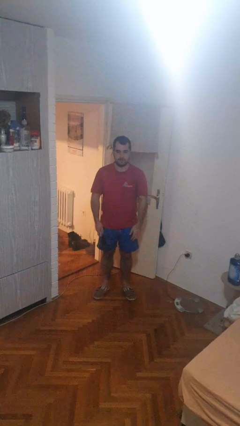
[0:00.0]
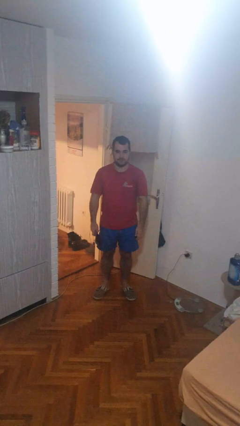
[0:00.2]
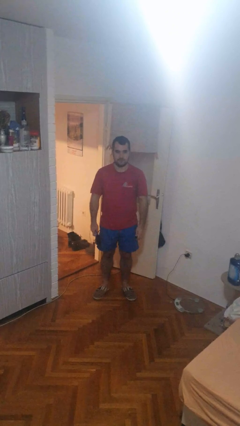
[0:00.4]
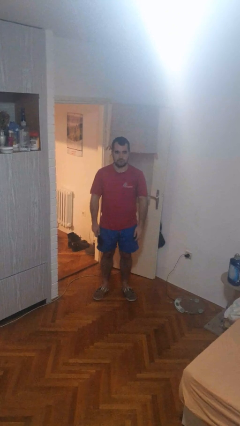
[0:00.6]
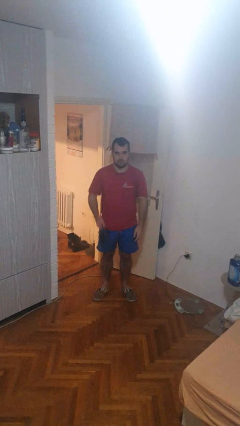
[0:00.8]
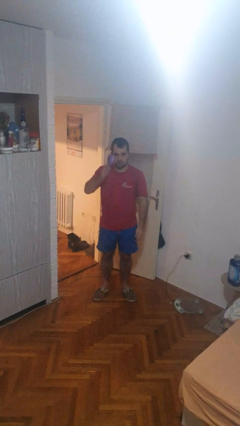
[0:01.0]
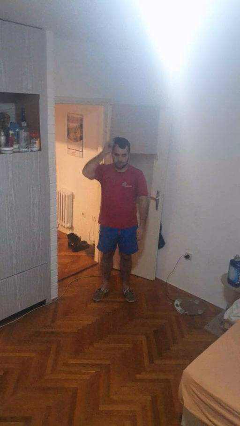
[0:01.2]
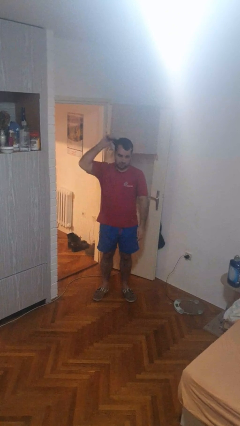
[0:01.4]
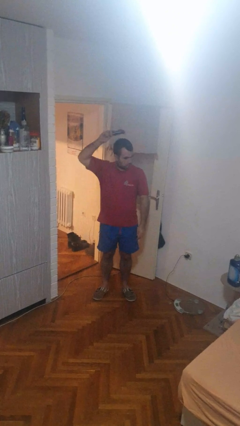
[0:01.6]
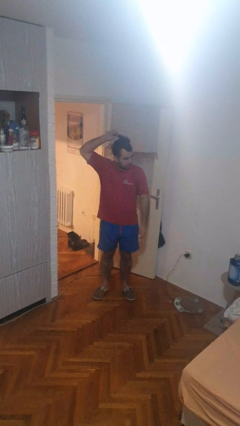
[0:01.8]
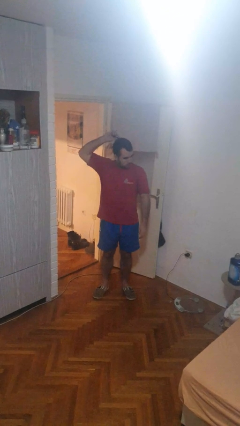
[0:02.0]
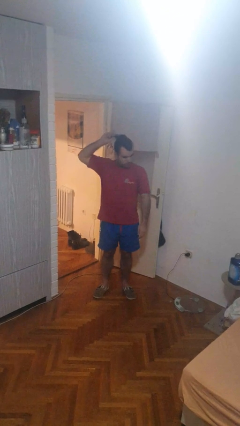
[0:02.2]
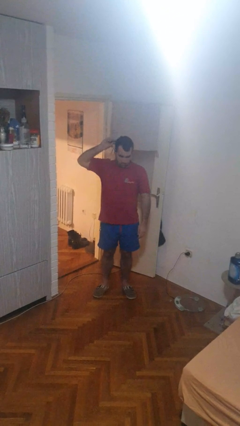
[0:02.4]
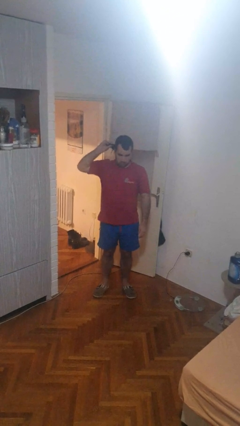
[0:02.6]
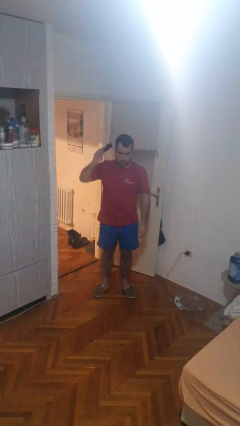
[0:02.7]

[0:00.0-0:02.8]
person brushes hair

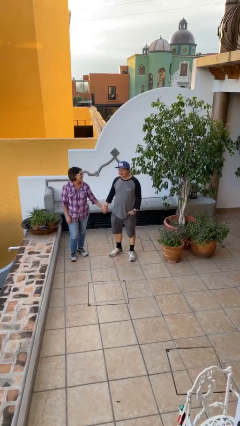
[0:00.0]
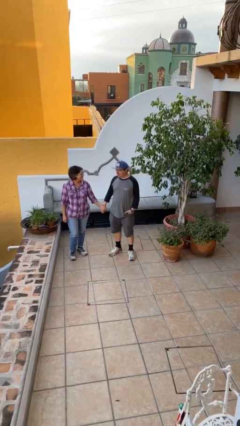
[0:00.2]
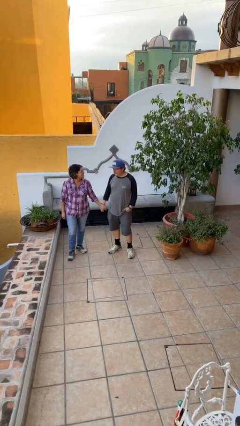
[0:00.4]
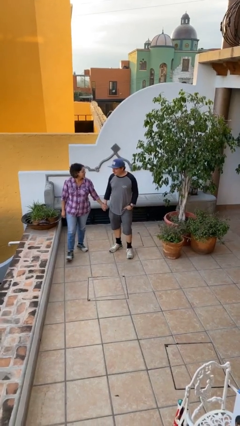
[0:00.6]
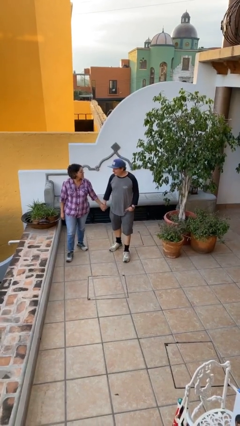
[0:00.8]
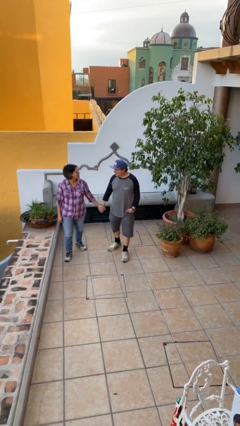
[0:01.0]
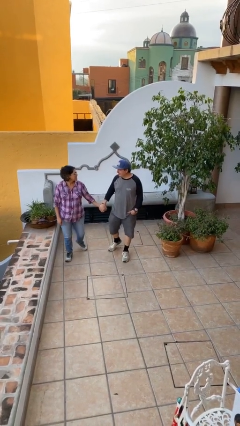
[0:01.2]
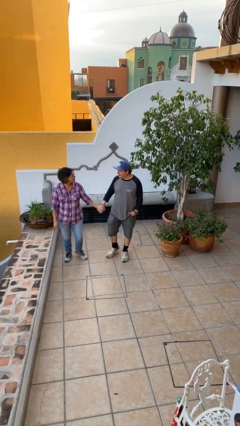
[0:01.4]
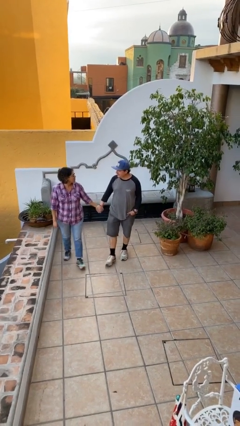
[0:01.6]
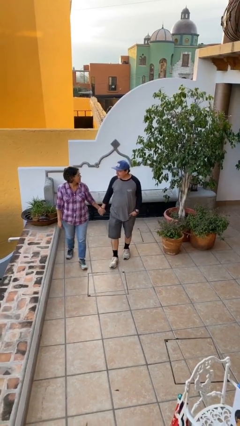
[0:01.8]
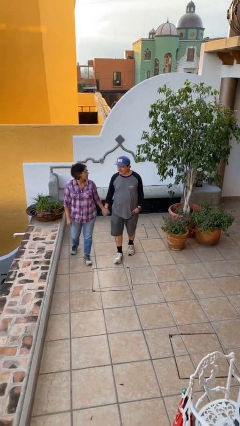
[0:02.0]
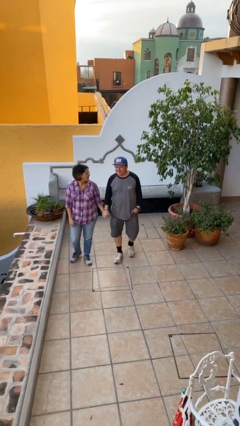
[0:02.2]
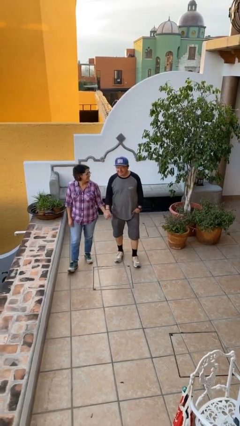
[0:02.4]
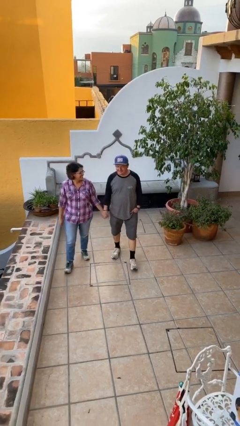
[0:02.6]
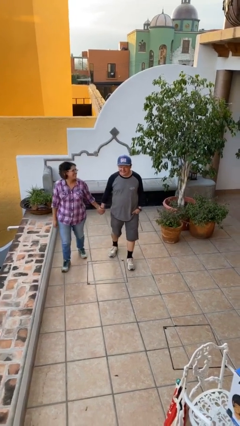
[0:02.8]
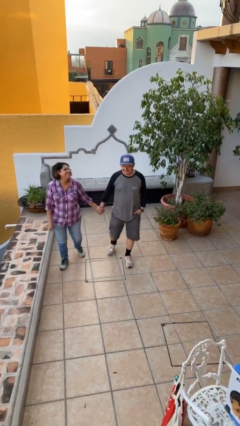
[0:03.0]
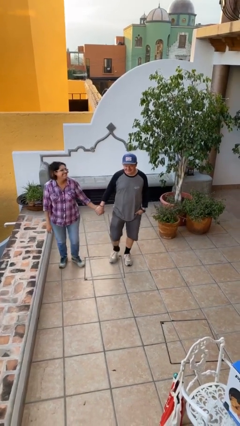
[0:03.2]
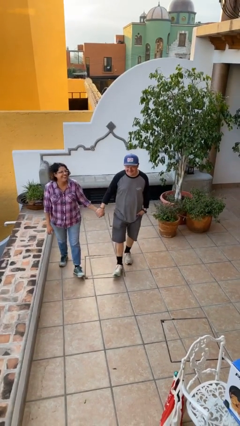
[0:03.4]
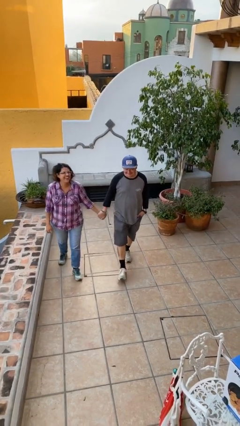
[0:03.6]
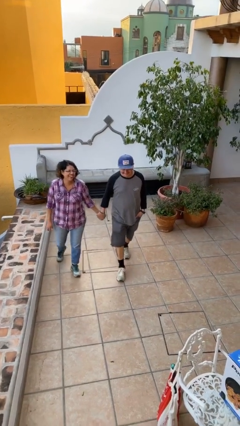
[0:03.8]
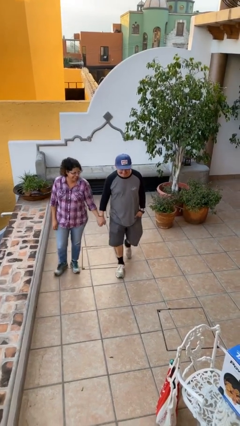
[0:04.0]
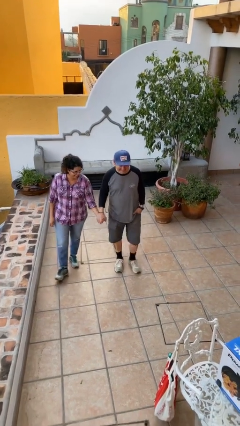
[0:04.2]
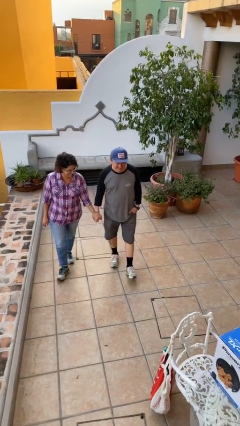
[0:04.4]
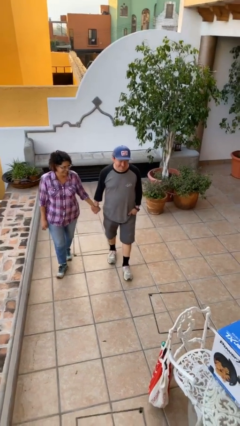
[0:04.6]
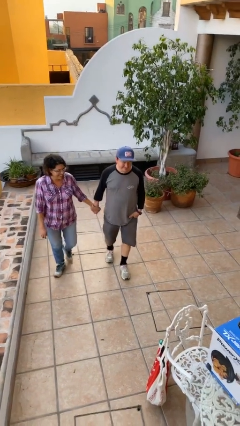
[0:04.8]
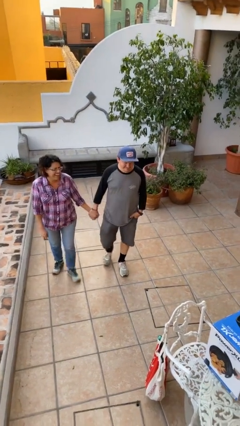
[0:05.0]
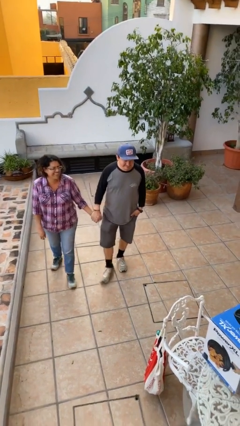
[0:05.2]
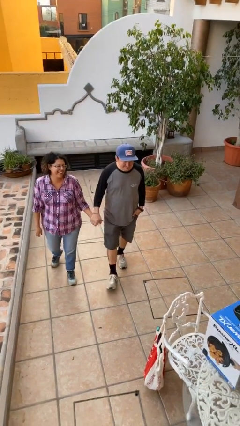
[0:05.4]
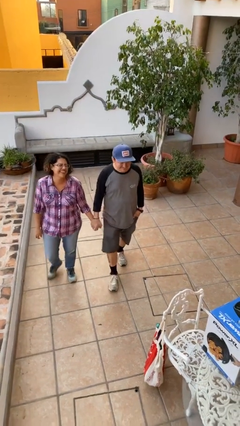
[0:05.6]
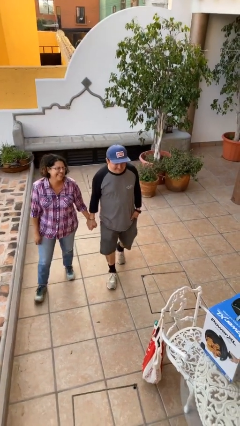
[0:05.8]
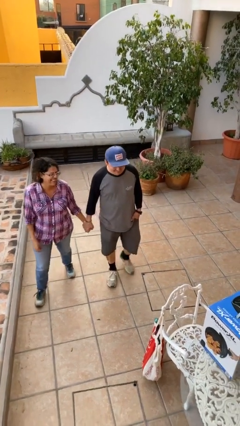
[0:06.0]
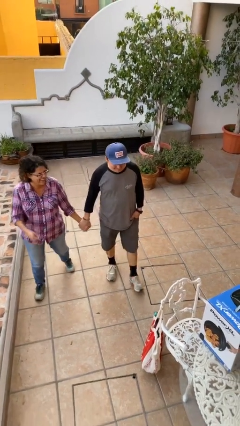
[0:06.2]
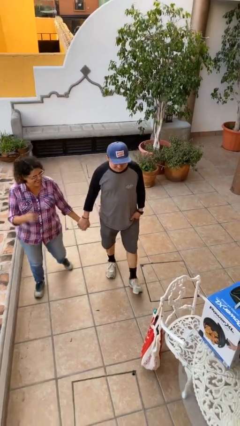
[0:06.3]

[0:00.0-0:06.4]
person holds hand

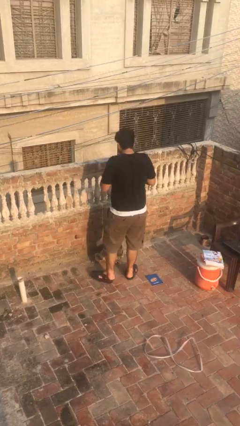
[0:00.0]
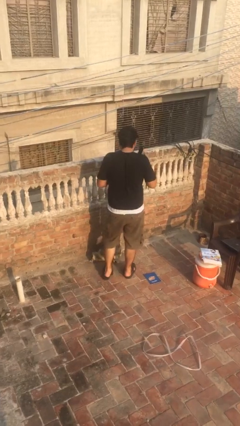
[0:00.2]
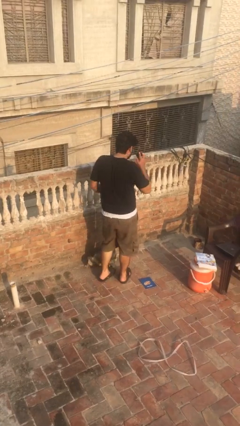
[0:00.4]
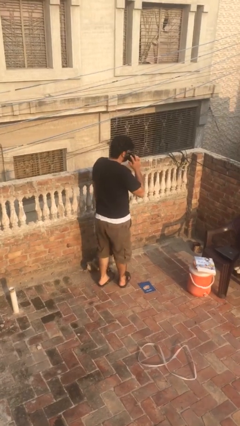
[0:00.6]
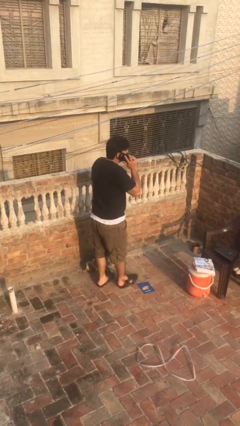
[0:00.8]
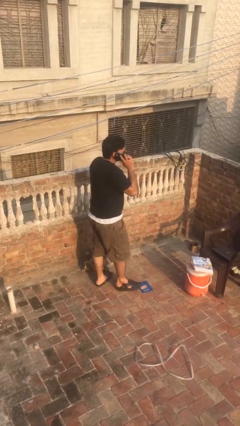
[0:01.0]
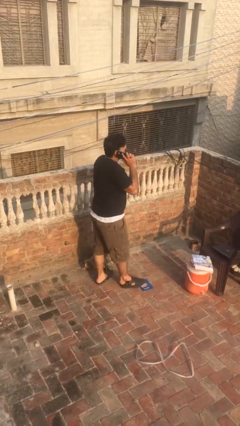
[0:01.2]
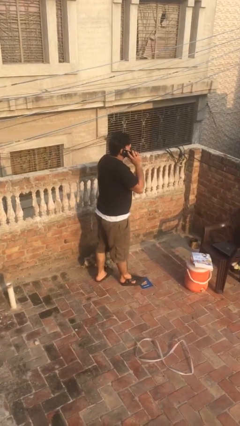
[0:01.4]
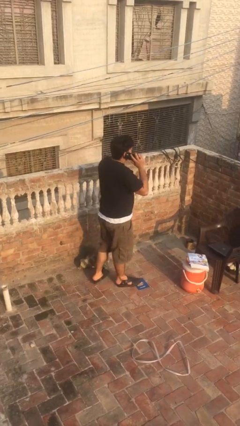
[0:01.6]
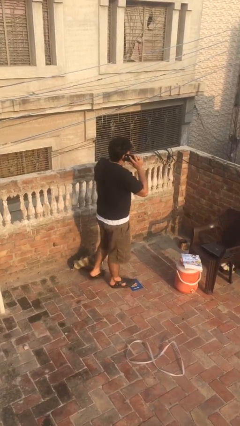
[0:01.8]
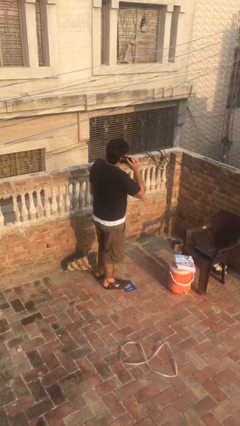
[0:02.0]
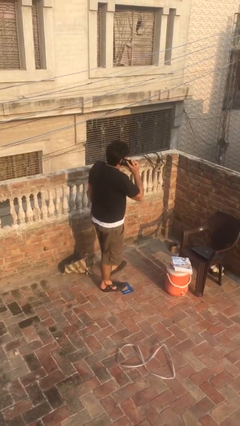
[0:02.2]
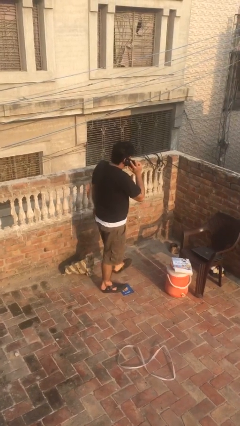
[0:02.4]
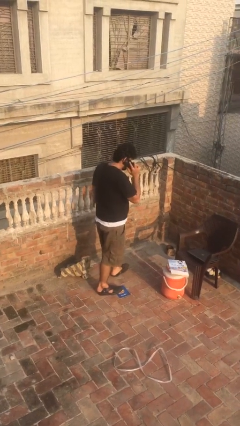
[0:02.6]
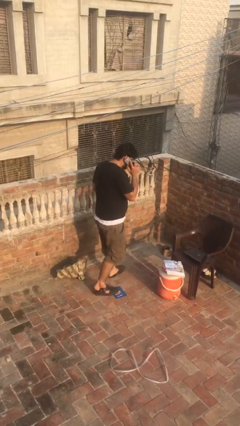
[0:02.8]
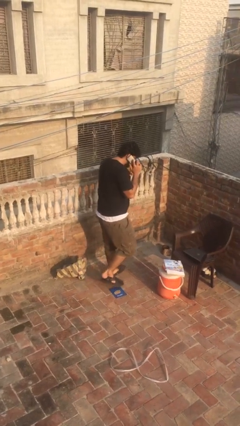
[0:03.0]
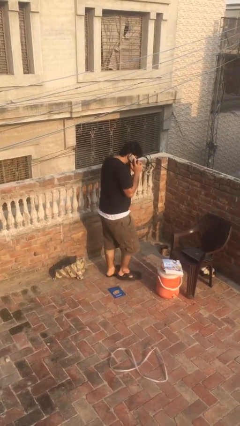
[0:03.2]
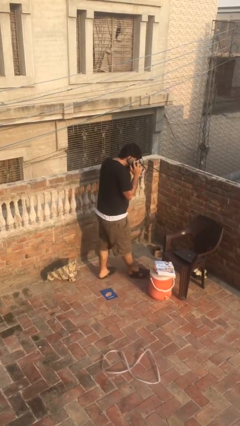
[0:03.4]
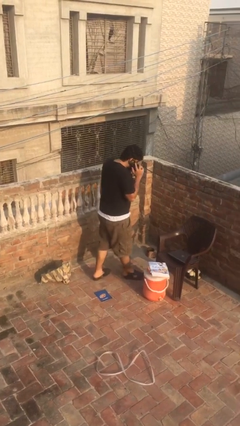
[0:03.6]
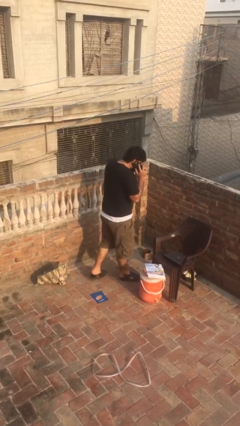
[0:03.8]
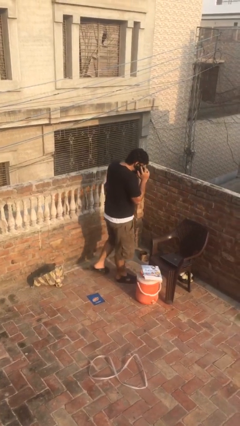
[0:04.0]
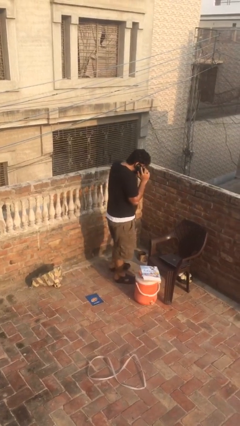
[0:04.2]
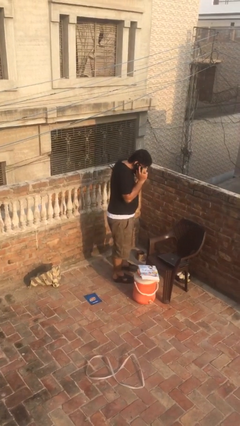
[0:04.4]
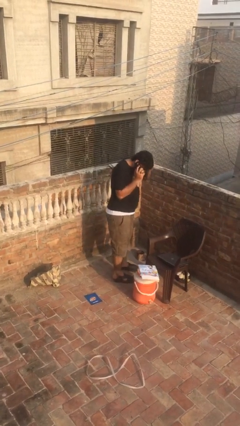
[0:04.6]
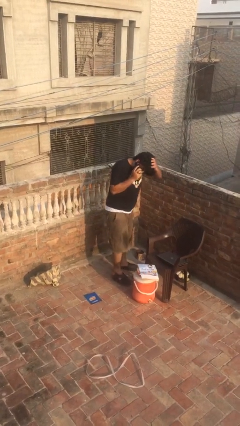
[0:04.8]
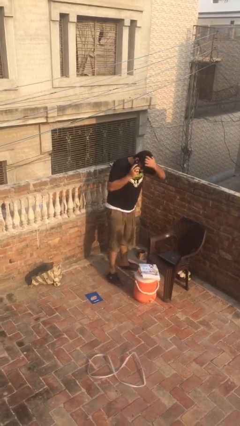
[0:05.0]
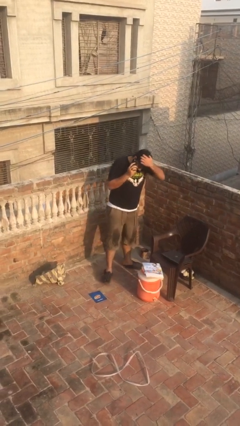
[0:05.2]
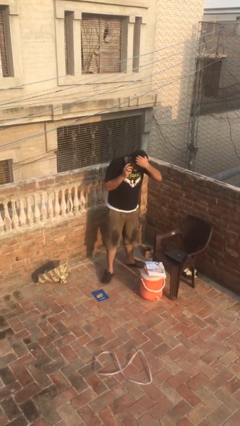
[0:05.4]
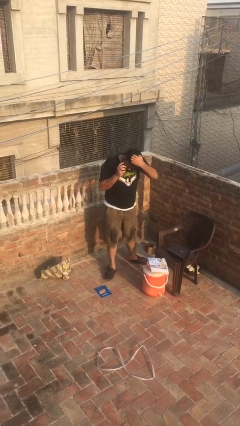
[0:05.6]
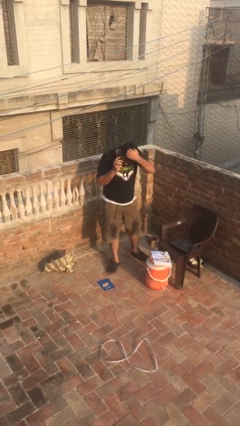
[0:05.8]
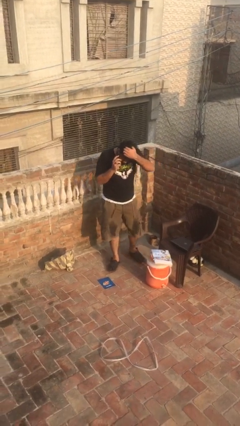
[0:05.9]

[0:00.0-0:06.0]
person talks on phone

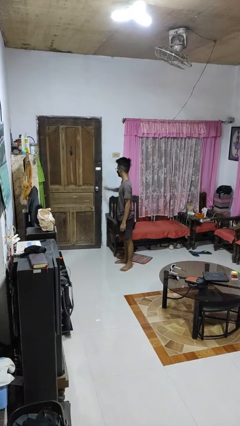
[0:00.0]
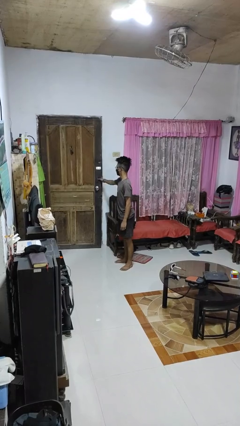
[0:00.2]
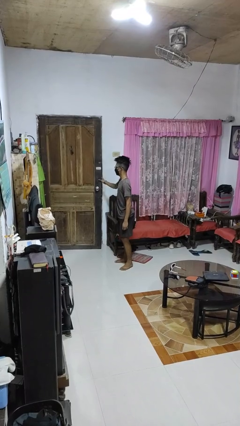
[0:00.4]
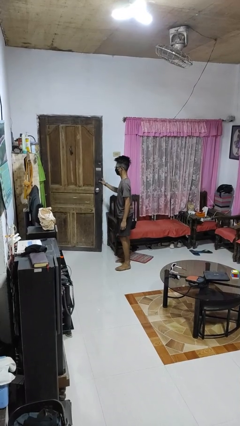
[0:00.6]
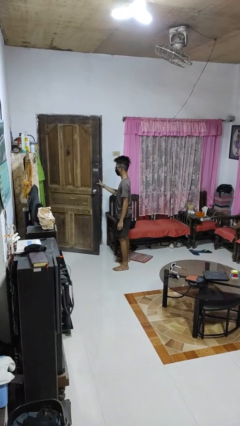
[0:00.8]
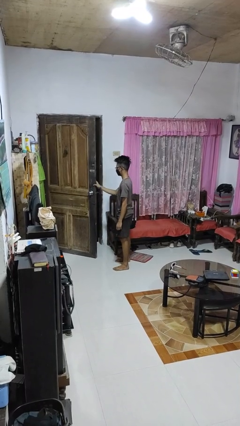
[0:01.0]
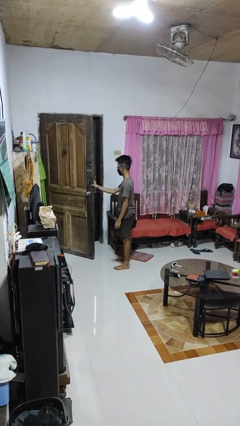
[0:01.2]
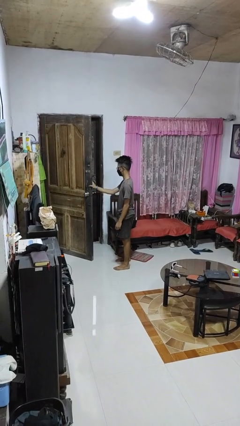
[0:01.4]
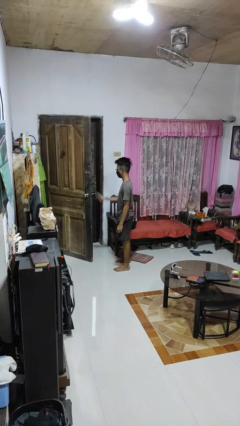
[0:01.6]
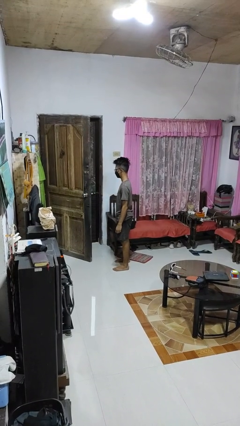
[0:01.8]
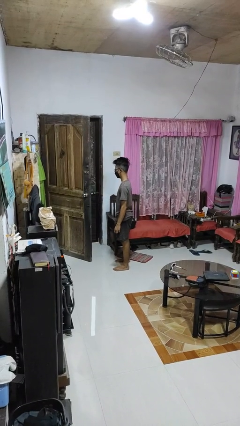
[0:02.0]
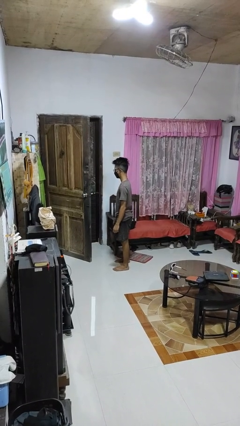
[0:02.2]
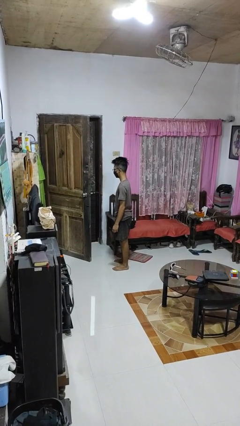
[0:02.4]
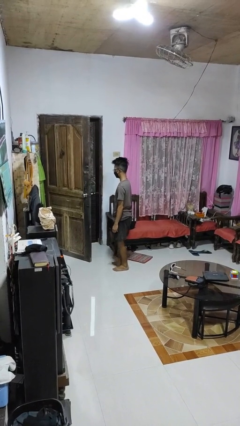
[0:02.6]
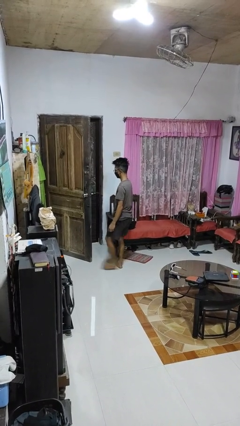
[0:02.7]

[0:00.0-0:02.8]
person opens facility door
